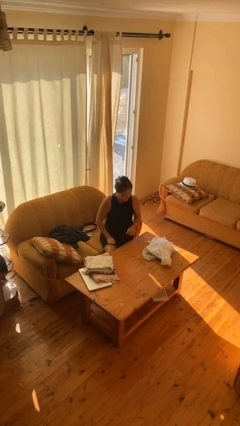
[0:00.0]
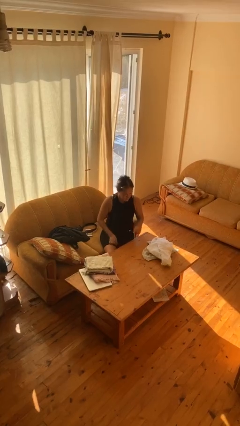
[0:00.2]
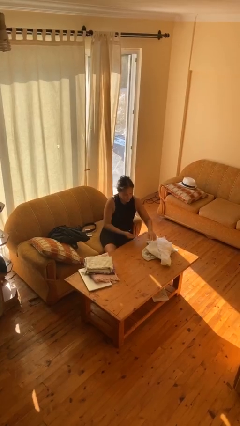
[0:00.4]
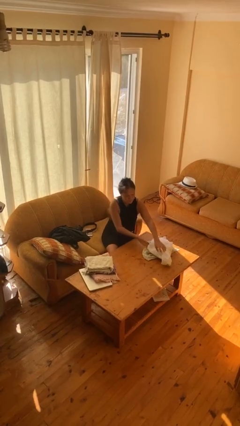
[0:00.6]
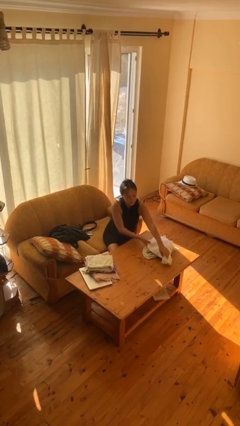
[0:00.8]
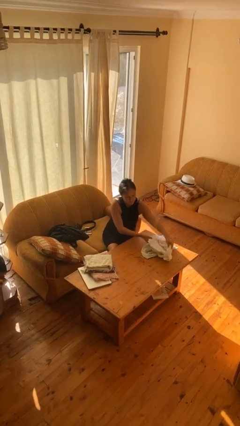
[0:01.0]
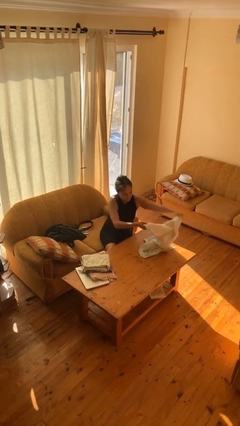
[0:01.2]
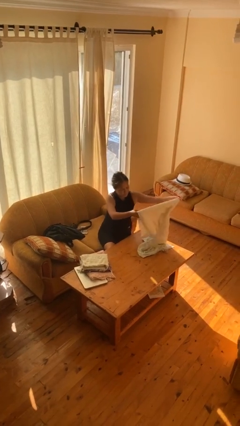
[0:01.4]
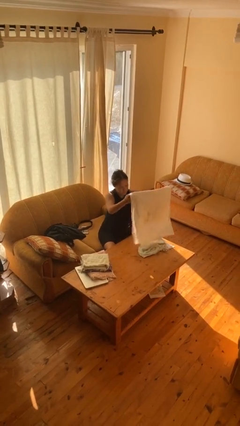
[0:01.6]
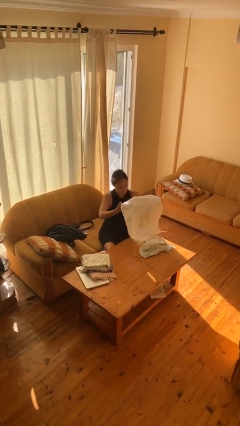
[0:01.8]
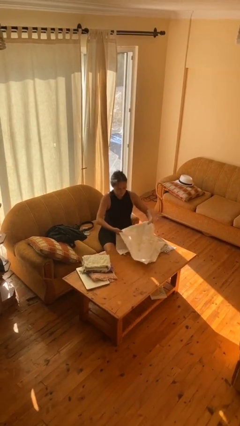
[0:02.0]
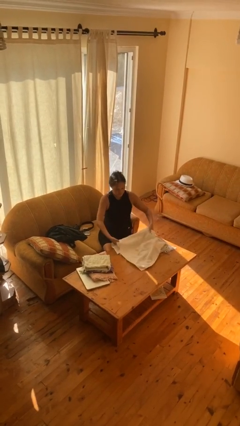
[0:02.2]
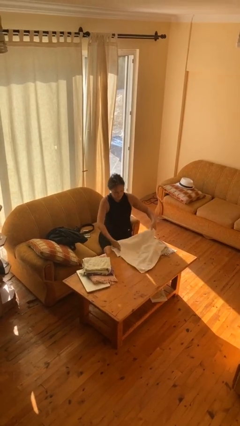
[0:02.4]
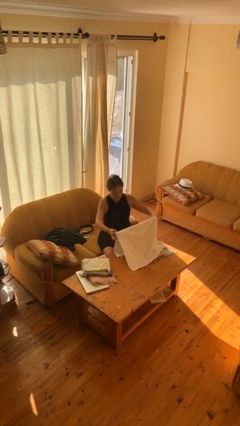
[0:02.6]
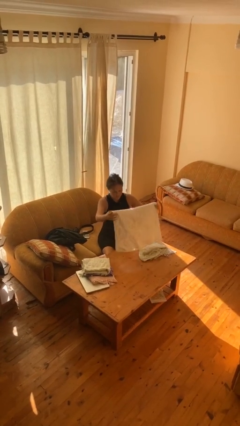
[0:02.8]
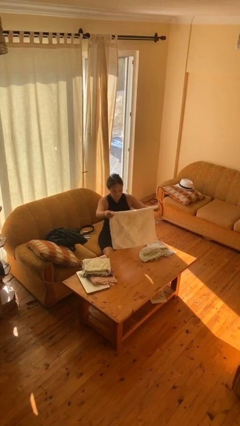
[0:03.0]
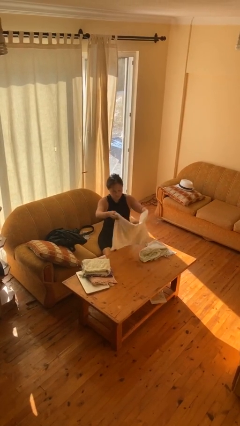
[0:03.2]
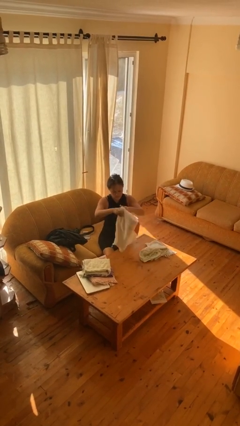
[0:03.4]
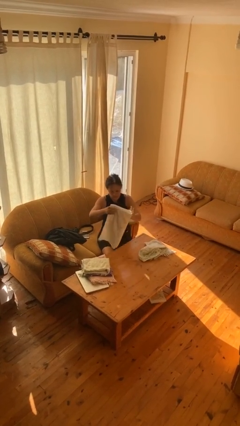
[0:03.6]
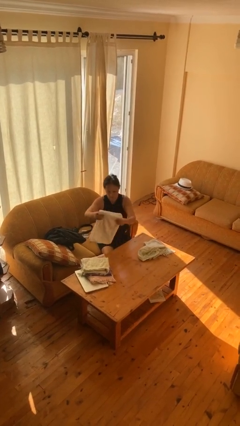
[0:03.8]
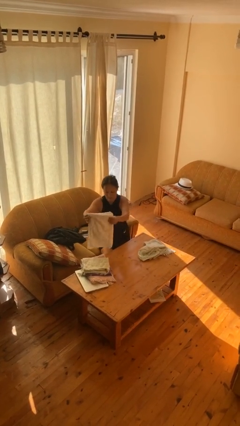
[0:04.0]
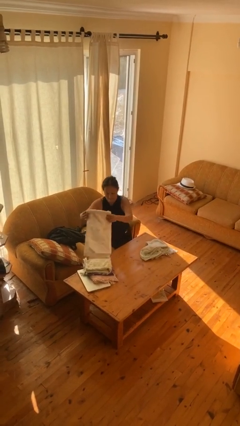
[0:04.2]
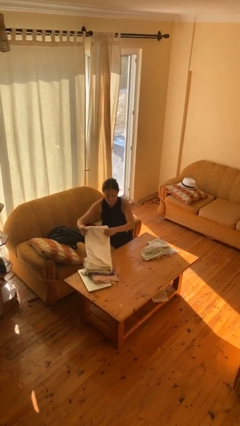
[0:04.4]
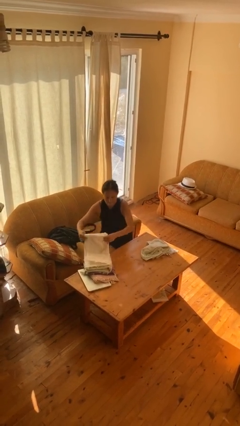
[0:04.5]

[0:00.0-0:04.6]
person folds towel

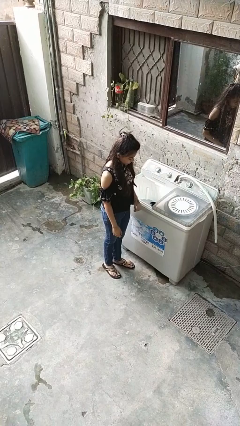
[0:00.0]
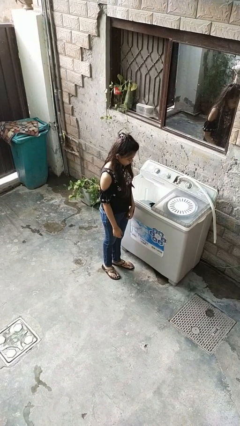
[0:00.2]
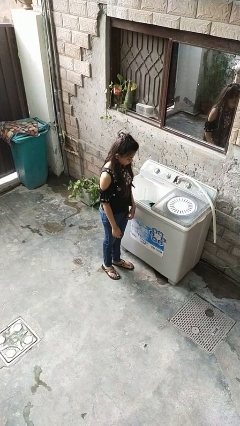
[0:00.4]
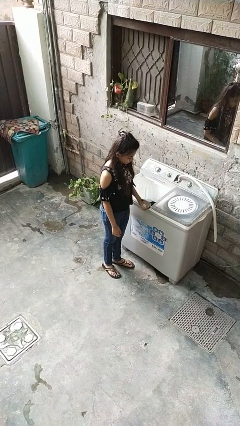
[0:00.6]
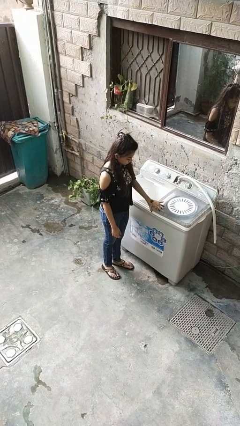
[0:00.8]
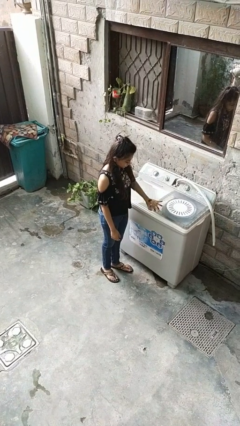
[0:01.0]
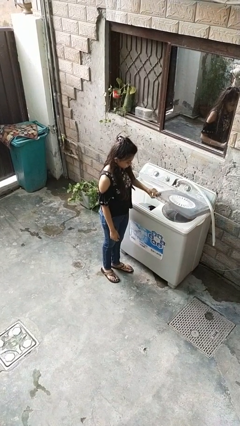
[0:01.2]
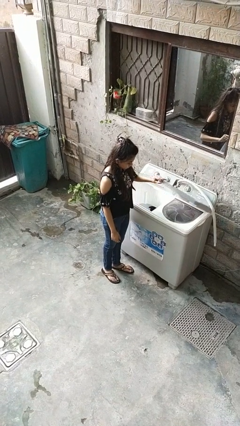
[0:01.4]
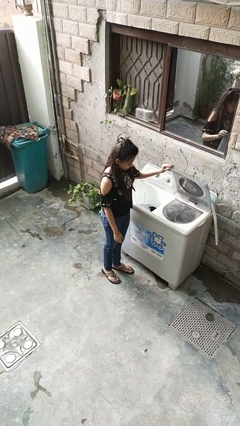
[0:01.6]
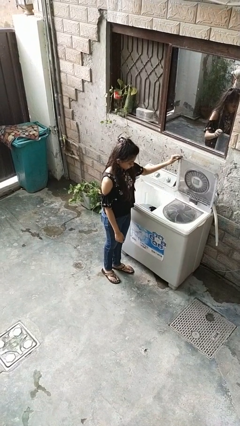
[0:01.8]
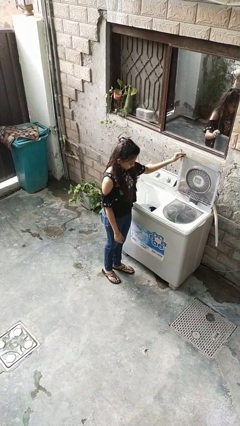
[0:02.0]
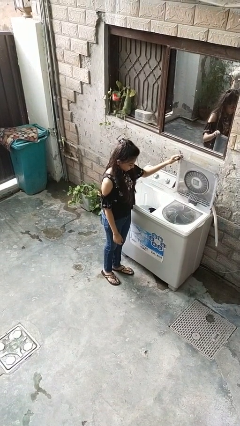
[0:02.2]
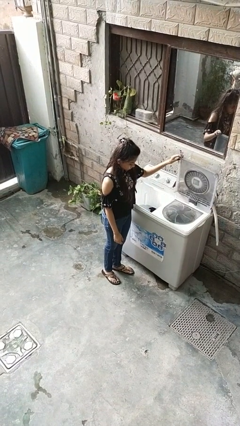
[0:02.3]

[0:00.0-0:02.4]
person opens clothes washer

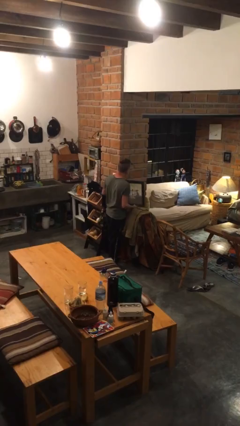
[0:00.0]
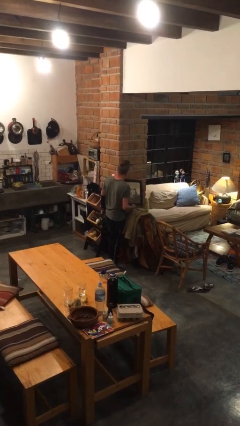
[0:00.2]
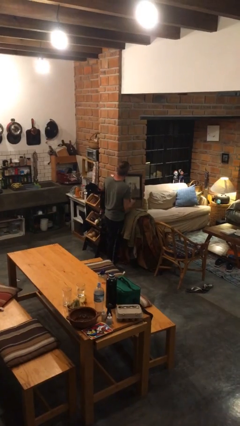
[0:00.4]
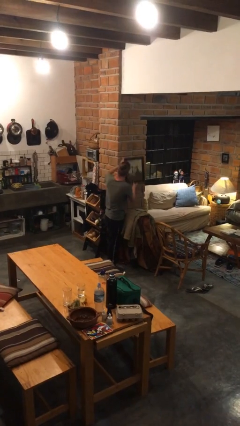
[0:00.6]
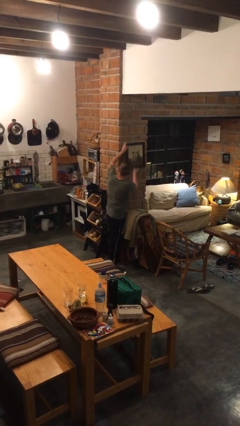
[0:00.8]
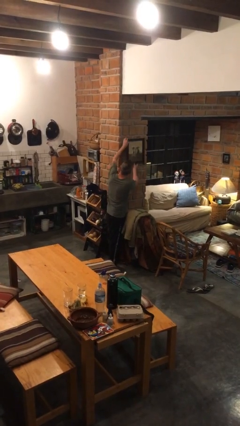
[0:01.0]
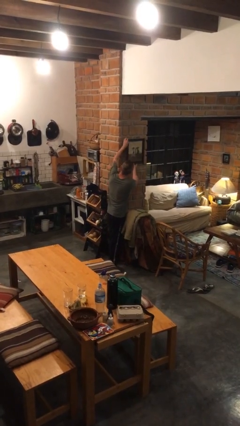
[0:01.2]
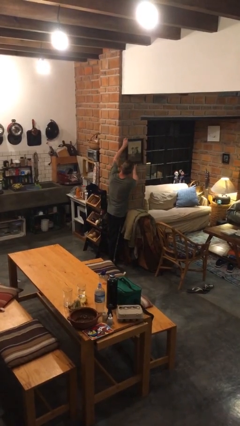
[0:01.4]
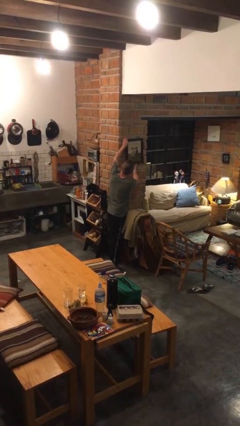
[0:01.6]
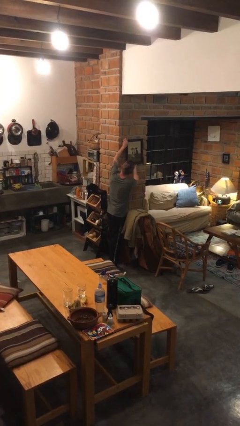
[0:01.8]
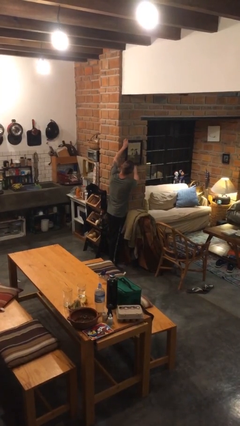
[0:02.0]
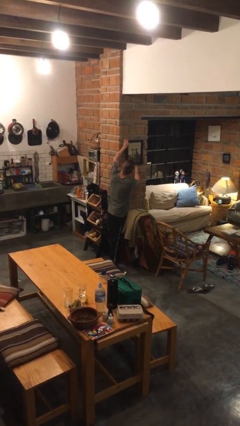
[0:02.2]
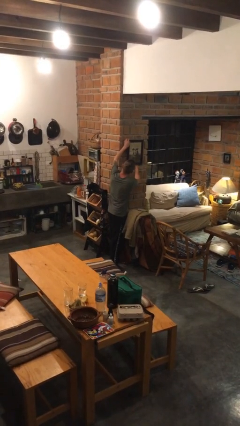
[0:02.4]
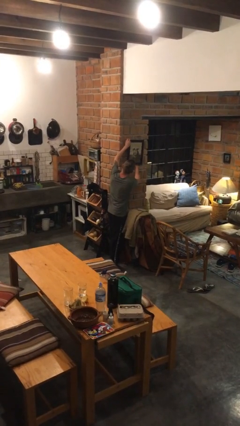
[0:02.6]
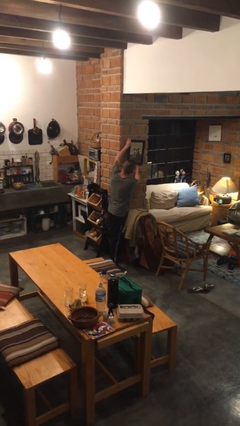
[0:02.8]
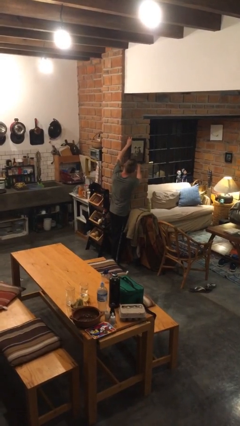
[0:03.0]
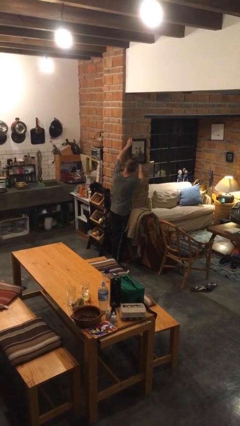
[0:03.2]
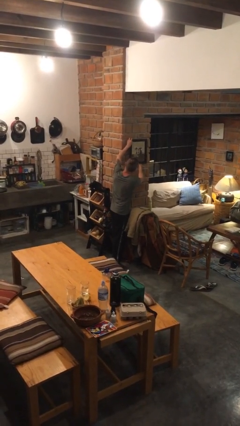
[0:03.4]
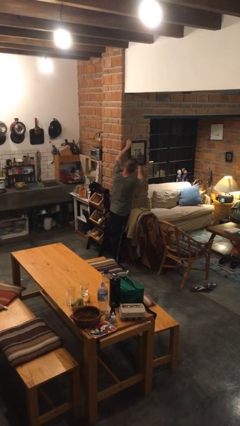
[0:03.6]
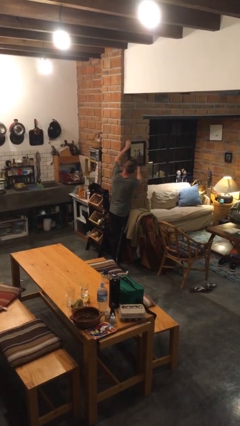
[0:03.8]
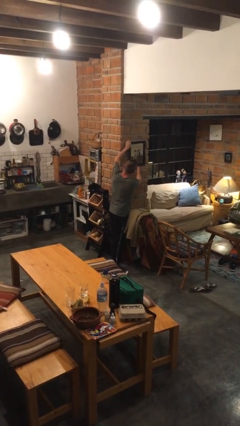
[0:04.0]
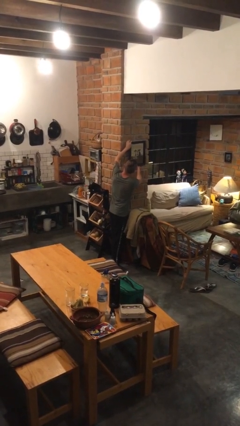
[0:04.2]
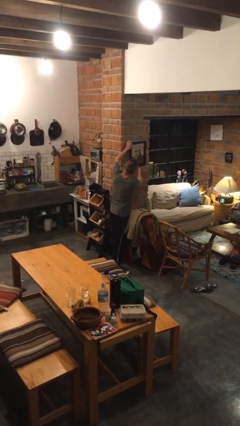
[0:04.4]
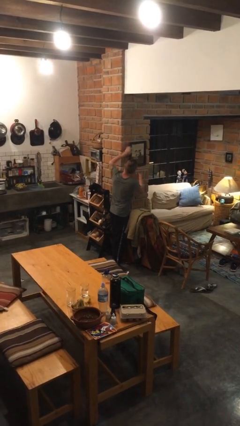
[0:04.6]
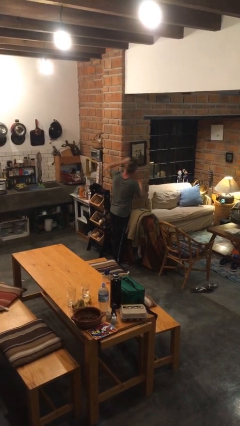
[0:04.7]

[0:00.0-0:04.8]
person puts up picture frame

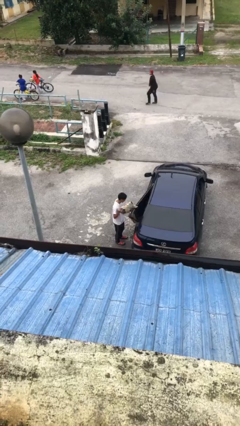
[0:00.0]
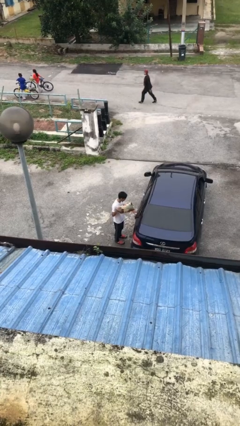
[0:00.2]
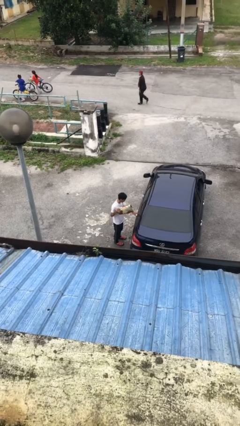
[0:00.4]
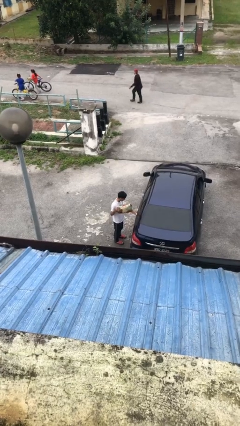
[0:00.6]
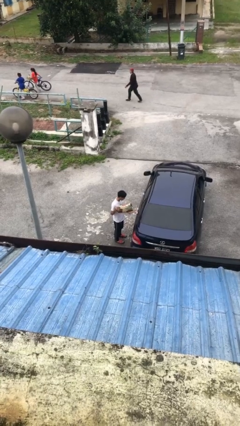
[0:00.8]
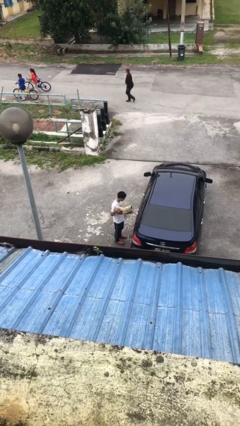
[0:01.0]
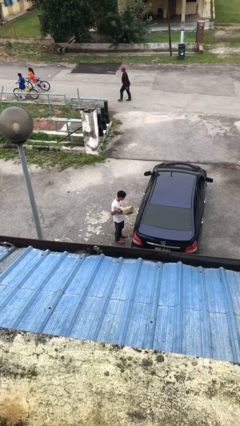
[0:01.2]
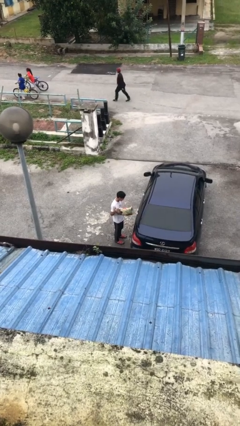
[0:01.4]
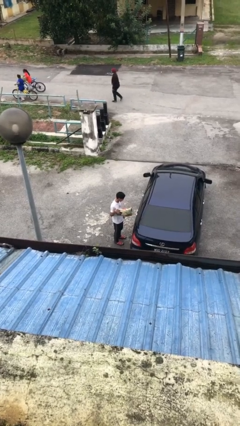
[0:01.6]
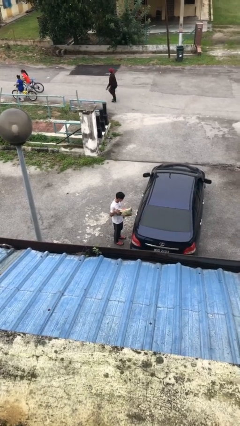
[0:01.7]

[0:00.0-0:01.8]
person closes car door

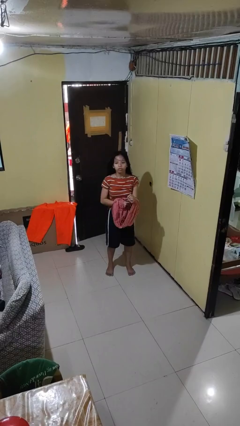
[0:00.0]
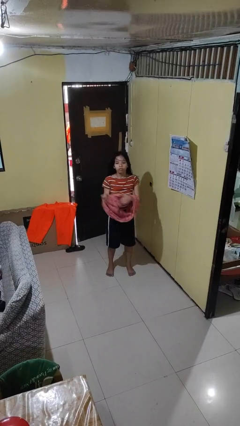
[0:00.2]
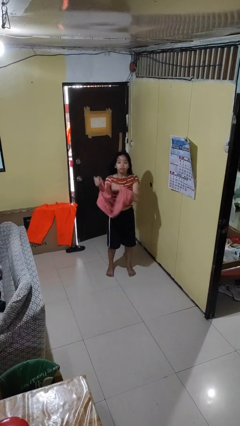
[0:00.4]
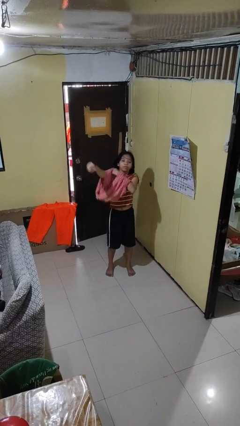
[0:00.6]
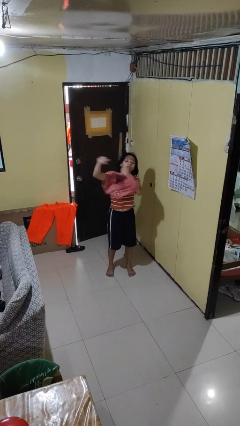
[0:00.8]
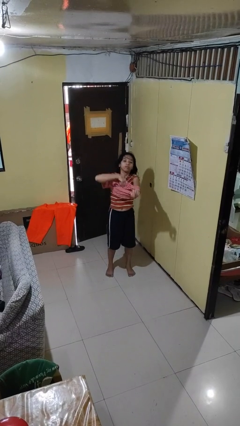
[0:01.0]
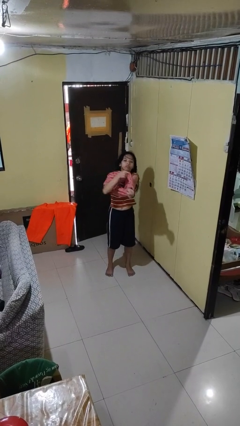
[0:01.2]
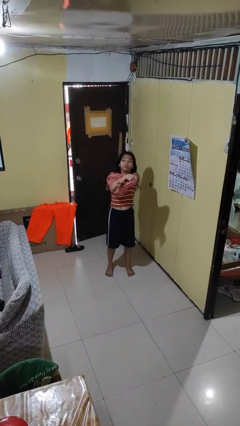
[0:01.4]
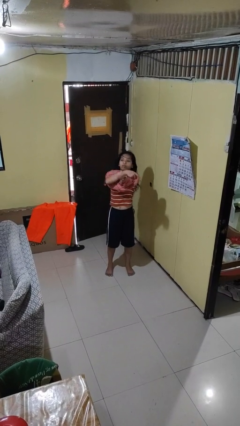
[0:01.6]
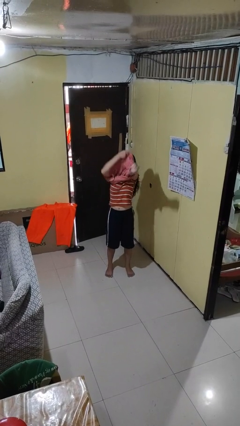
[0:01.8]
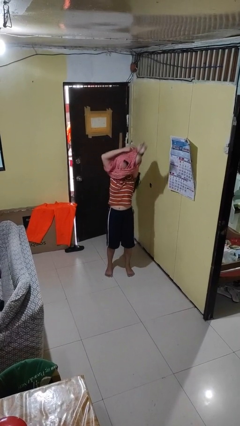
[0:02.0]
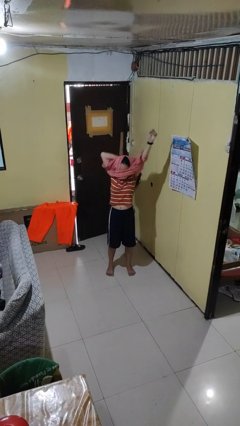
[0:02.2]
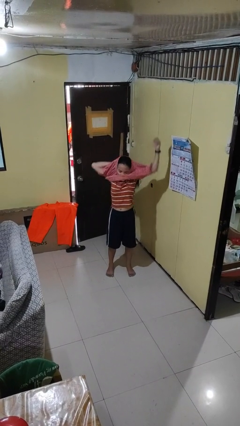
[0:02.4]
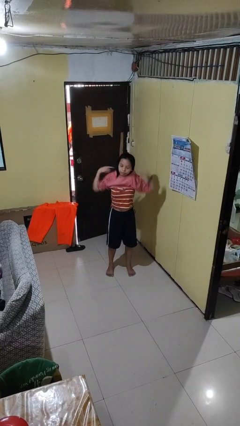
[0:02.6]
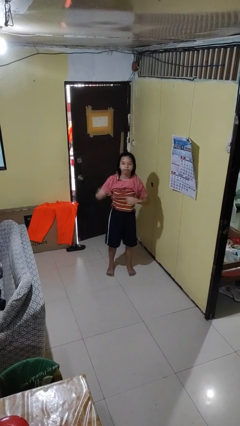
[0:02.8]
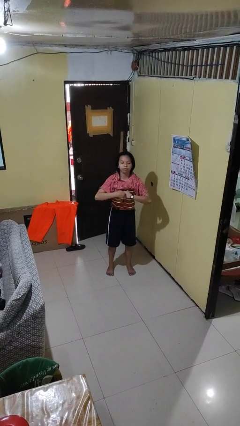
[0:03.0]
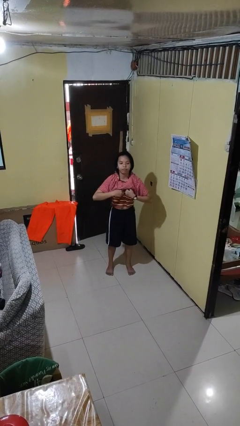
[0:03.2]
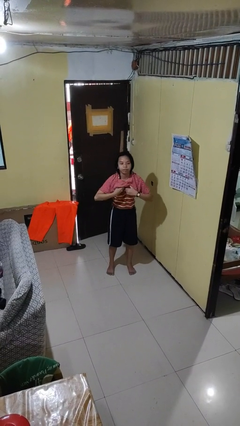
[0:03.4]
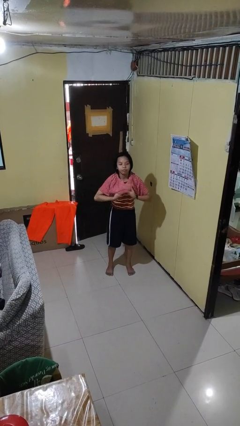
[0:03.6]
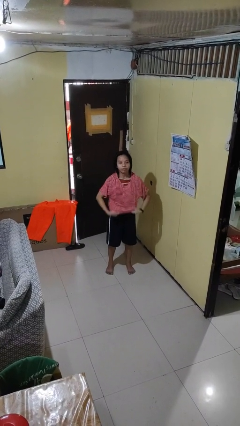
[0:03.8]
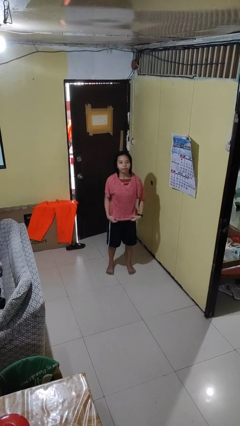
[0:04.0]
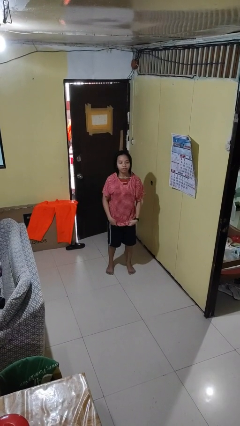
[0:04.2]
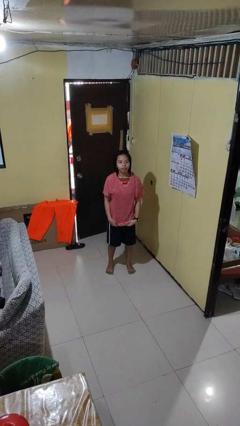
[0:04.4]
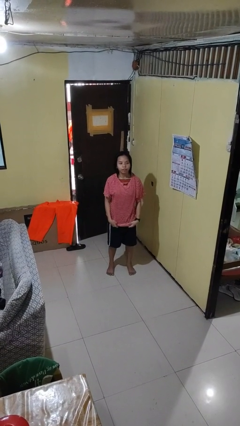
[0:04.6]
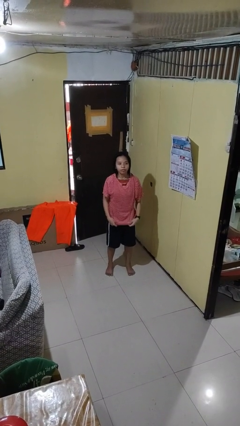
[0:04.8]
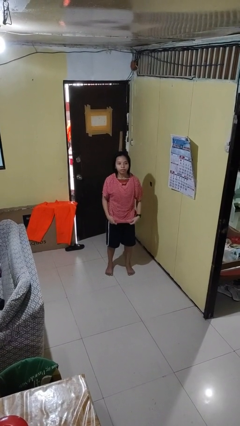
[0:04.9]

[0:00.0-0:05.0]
person puts on shirt
